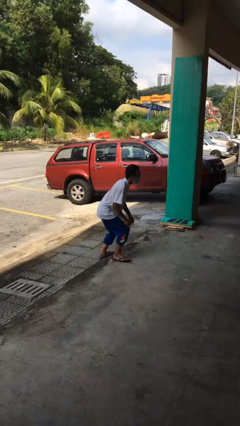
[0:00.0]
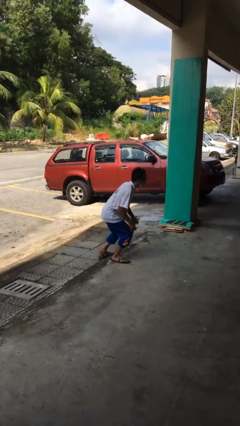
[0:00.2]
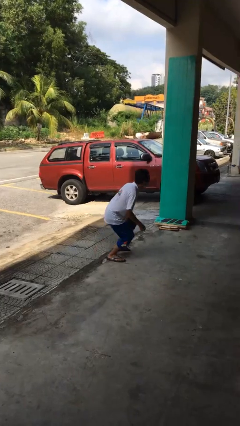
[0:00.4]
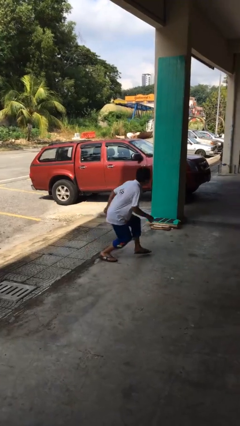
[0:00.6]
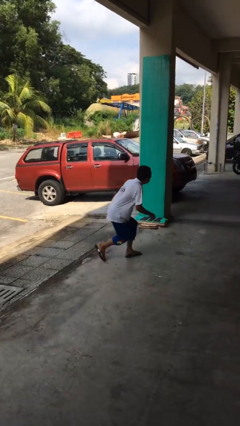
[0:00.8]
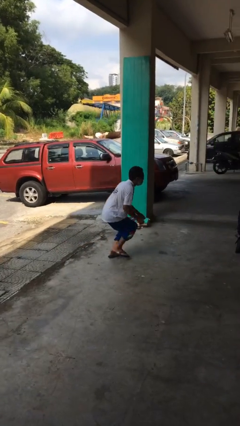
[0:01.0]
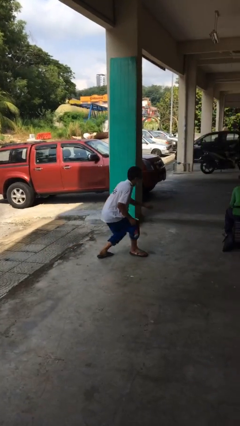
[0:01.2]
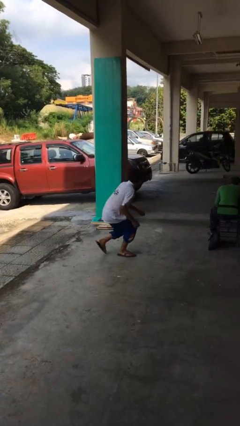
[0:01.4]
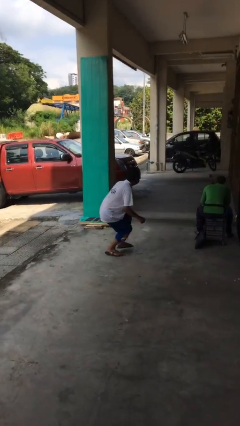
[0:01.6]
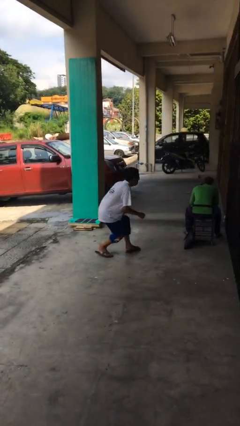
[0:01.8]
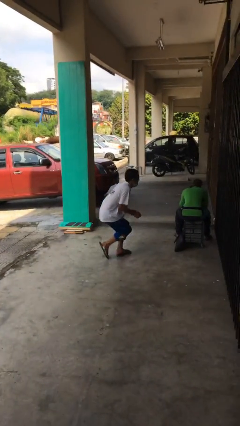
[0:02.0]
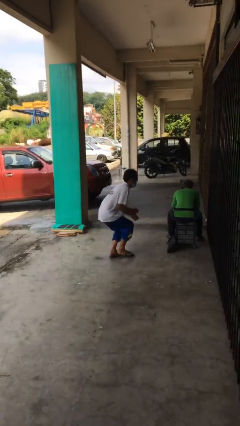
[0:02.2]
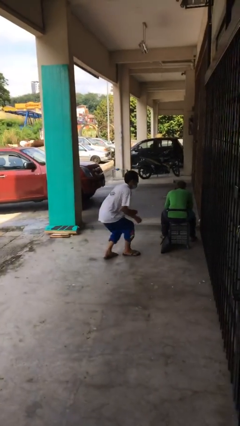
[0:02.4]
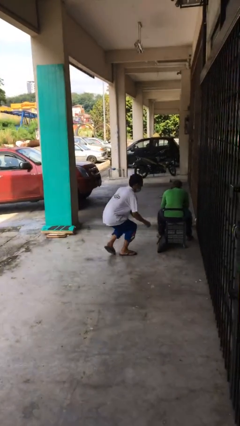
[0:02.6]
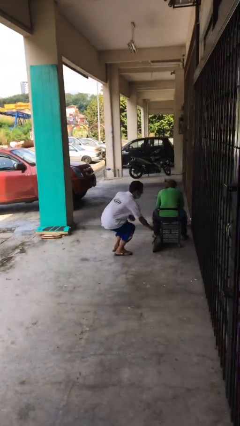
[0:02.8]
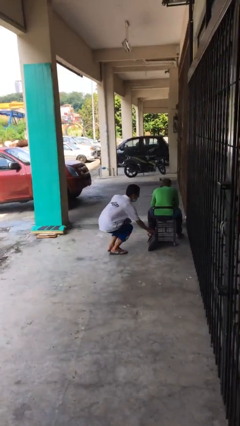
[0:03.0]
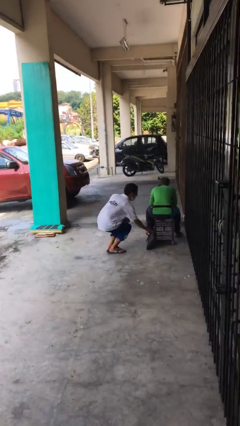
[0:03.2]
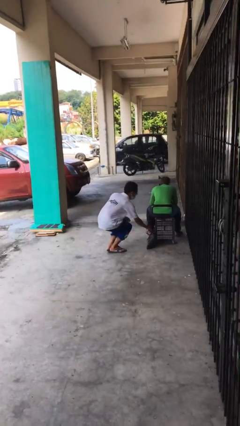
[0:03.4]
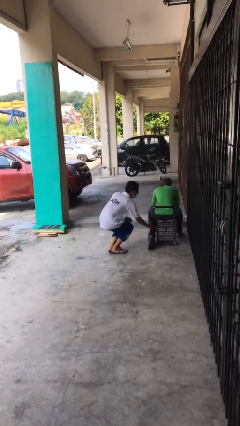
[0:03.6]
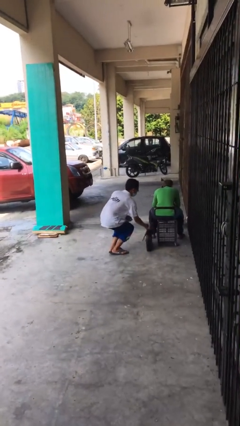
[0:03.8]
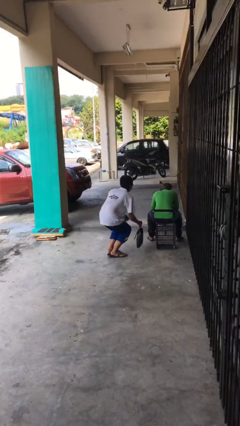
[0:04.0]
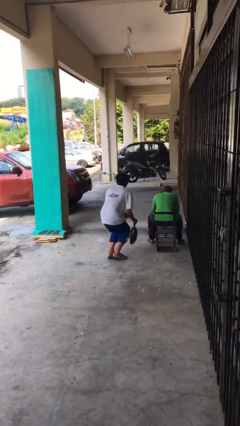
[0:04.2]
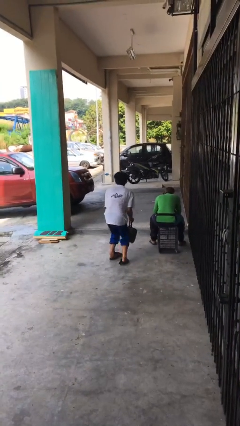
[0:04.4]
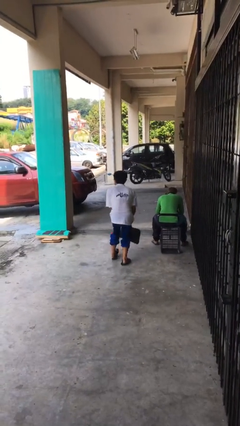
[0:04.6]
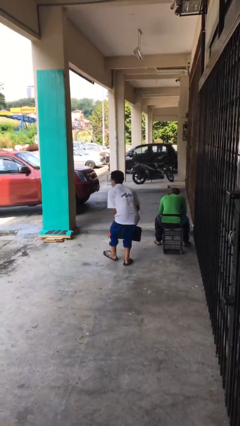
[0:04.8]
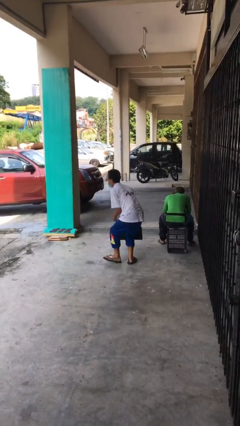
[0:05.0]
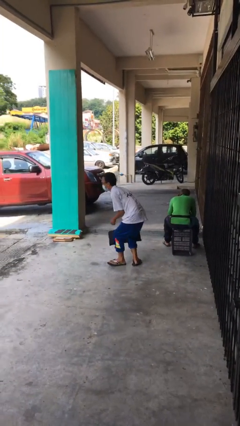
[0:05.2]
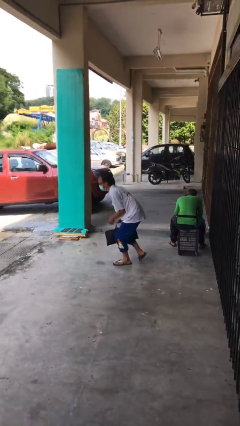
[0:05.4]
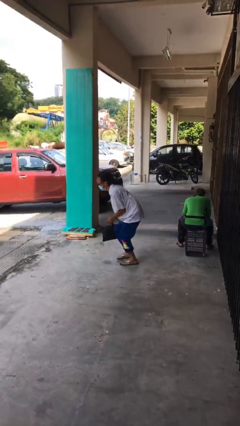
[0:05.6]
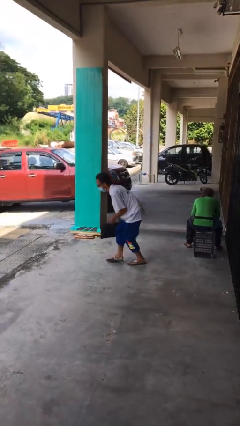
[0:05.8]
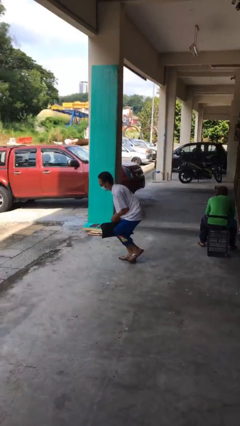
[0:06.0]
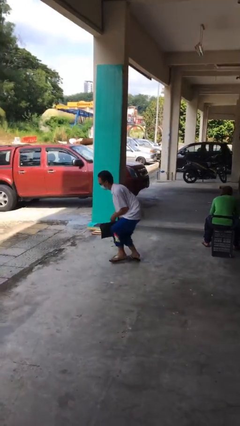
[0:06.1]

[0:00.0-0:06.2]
person steals object from person

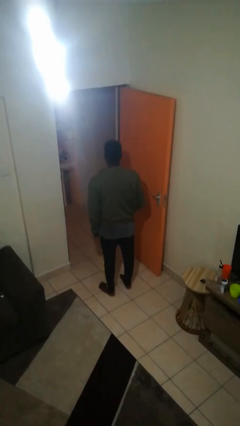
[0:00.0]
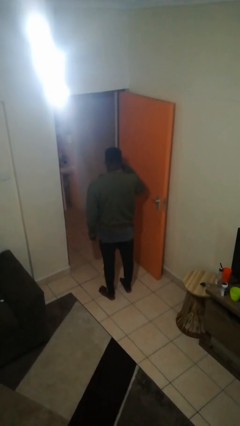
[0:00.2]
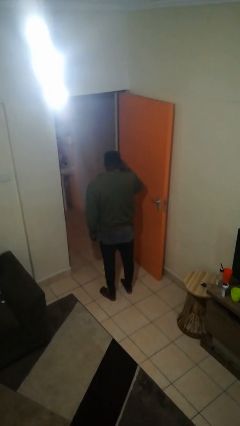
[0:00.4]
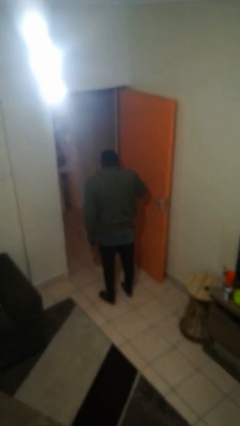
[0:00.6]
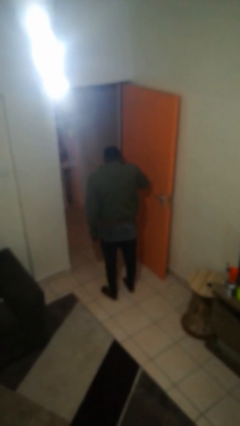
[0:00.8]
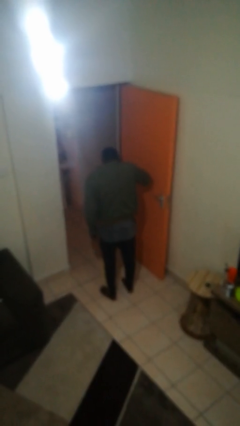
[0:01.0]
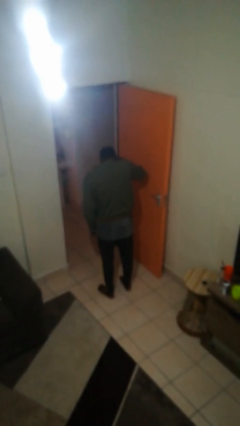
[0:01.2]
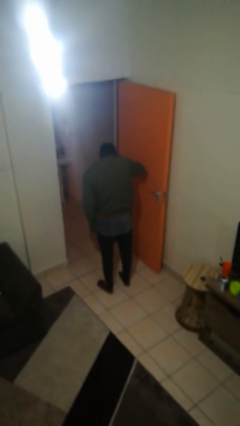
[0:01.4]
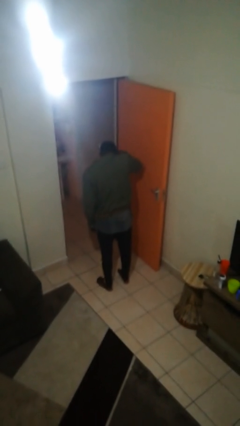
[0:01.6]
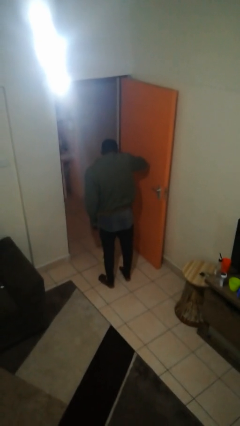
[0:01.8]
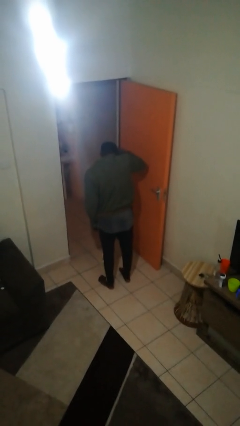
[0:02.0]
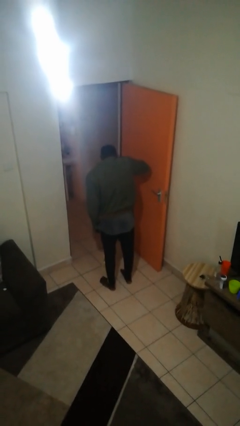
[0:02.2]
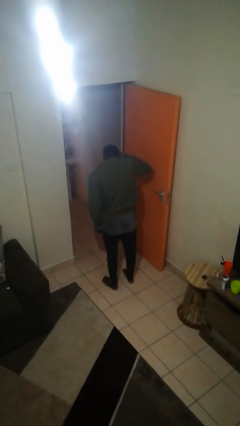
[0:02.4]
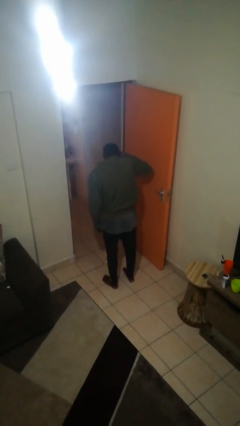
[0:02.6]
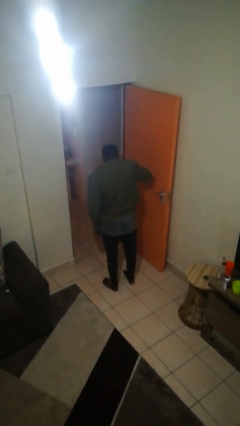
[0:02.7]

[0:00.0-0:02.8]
person brushes hair

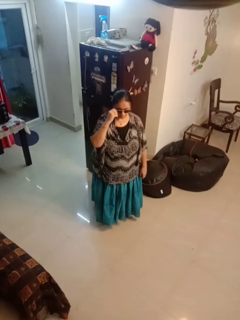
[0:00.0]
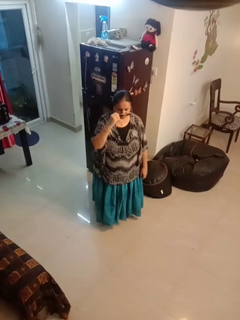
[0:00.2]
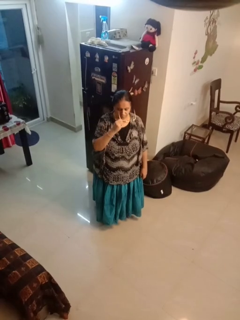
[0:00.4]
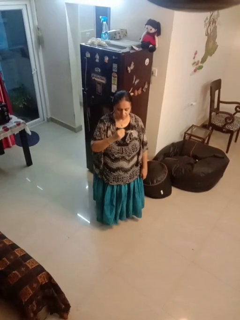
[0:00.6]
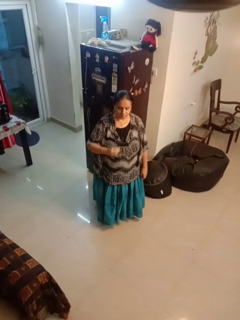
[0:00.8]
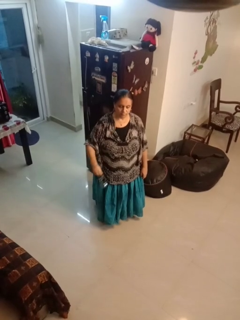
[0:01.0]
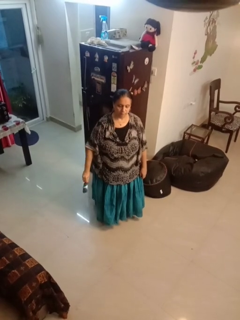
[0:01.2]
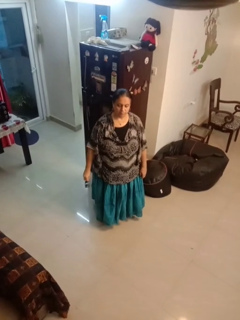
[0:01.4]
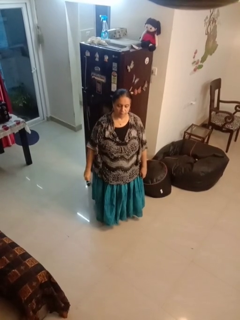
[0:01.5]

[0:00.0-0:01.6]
person takes off sunglasses

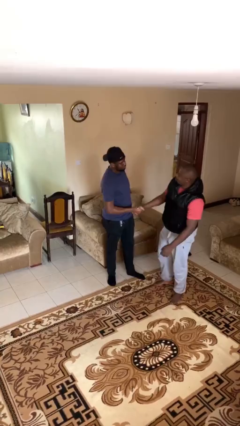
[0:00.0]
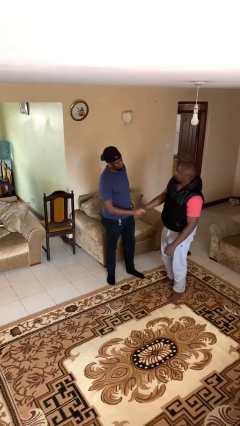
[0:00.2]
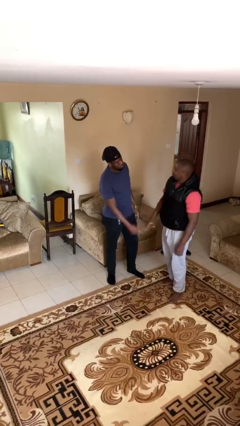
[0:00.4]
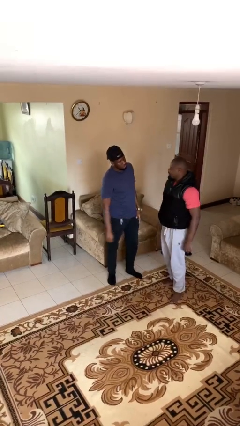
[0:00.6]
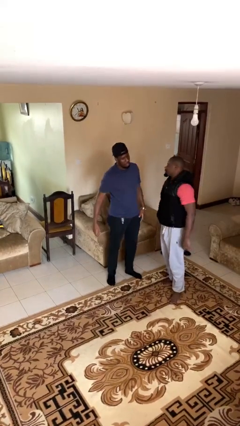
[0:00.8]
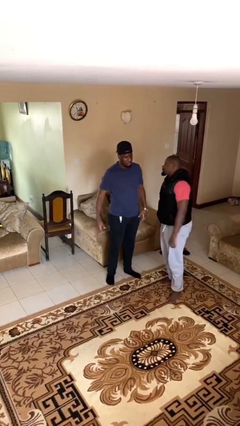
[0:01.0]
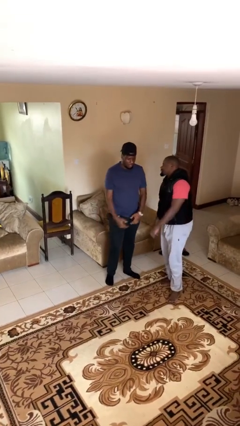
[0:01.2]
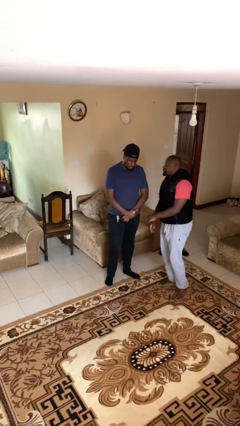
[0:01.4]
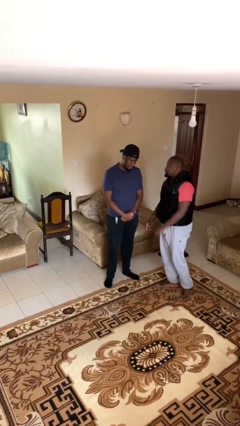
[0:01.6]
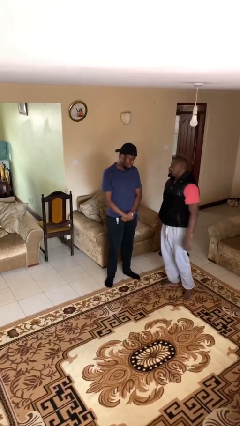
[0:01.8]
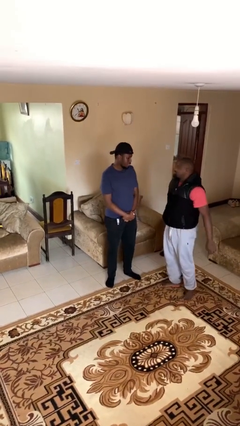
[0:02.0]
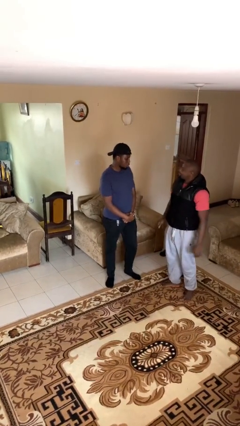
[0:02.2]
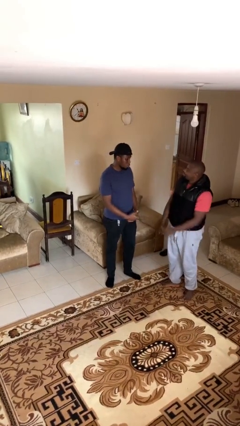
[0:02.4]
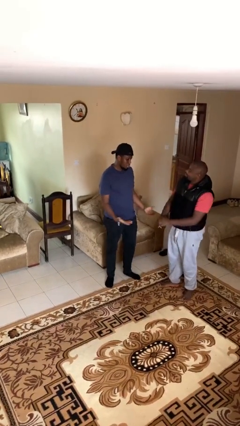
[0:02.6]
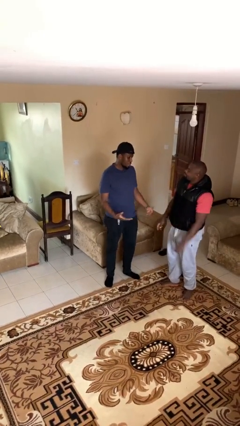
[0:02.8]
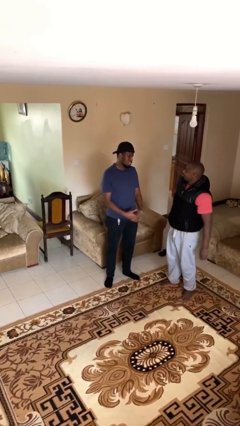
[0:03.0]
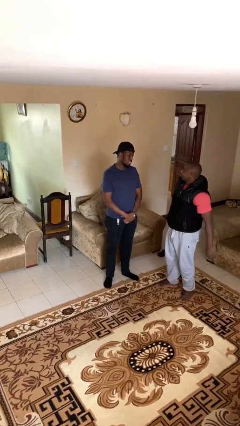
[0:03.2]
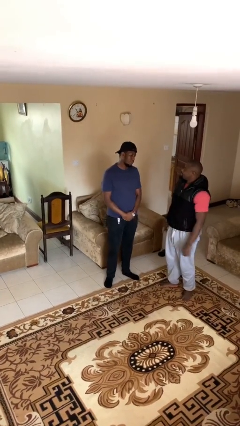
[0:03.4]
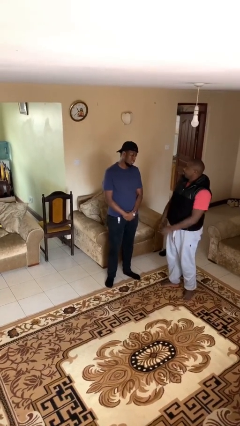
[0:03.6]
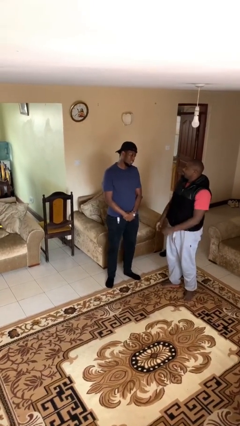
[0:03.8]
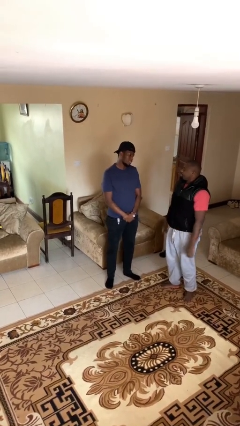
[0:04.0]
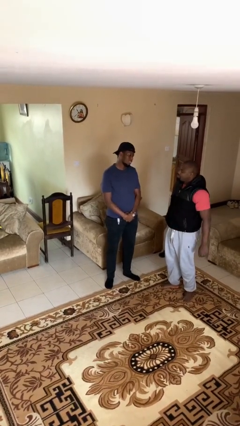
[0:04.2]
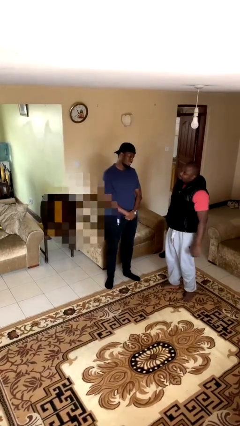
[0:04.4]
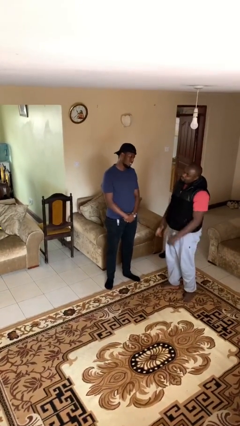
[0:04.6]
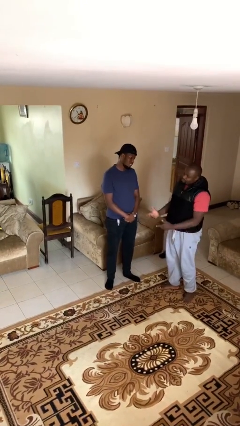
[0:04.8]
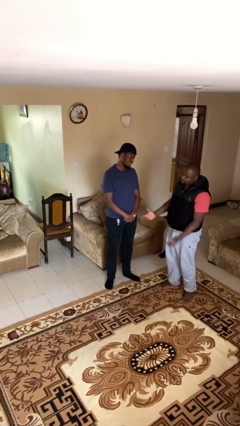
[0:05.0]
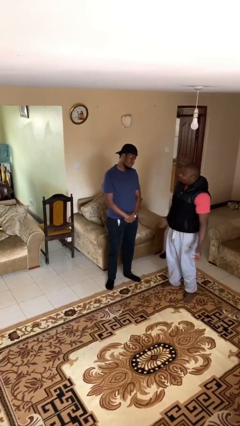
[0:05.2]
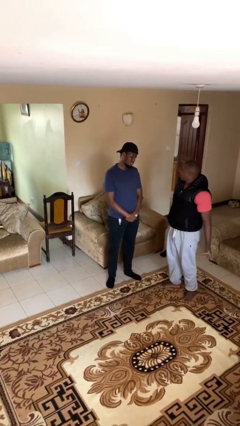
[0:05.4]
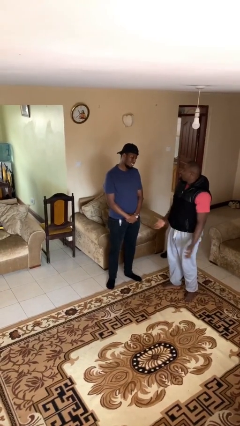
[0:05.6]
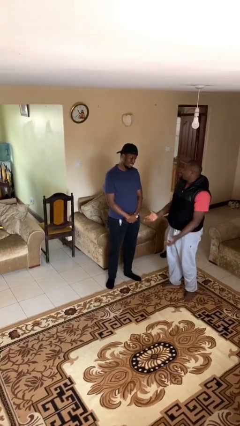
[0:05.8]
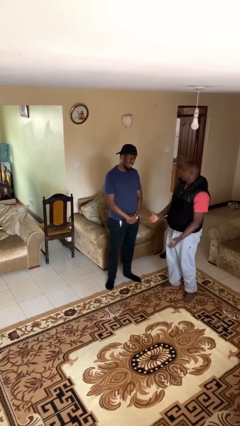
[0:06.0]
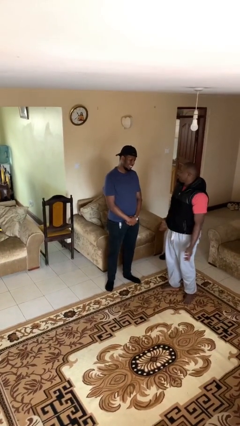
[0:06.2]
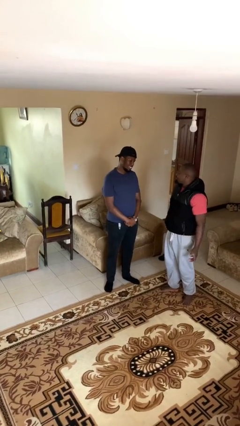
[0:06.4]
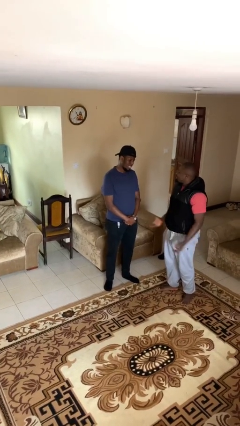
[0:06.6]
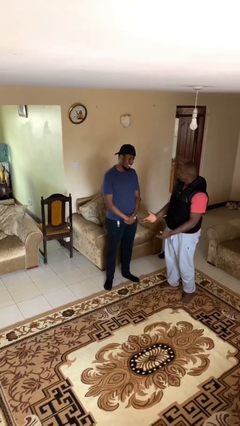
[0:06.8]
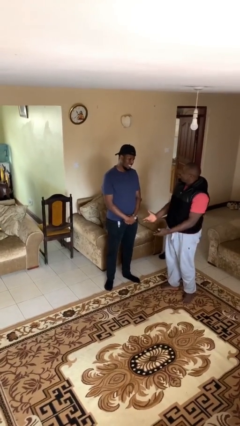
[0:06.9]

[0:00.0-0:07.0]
person talks to person

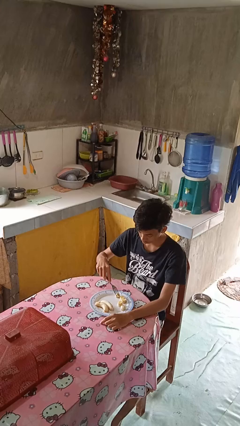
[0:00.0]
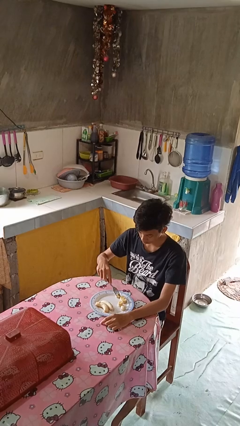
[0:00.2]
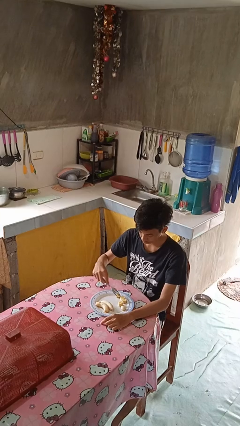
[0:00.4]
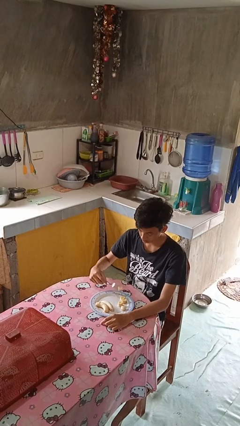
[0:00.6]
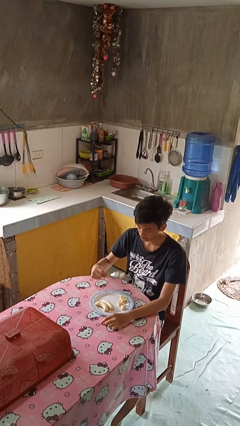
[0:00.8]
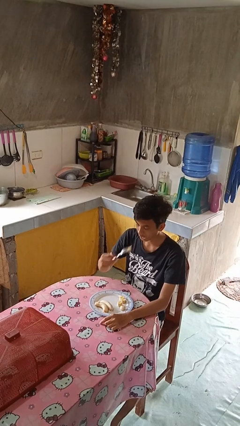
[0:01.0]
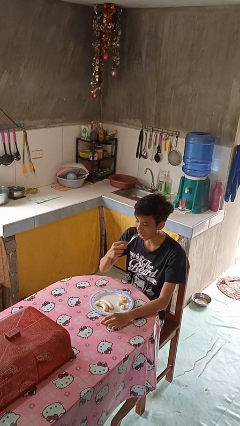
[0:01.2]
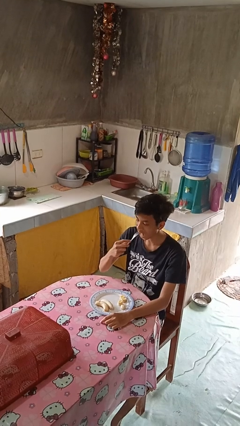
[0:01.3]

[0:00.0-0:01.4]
person eats with utensil
